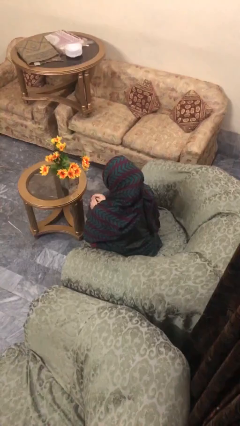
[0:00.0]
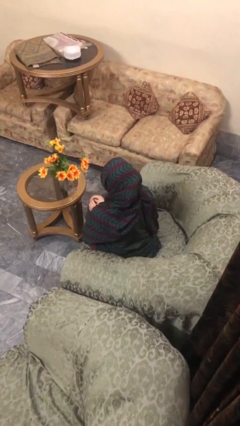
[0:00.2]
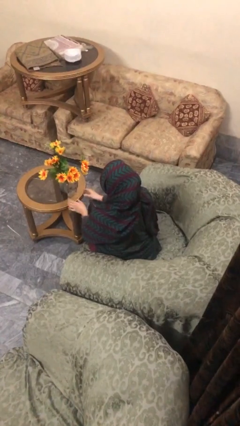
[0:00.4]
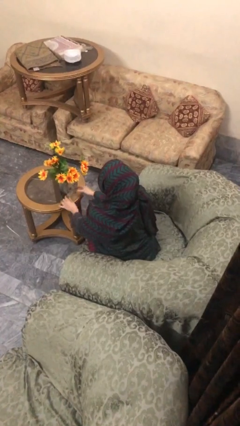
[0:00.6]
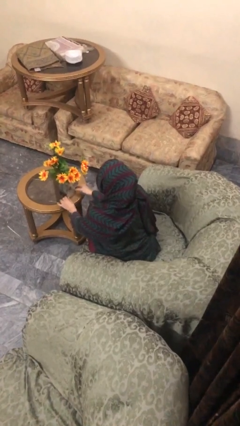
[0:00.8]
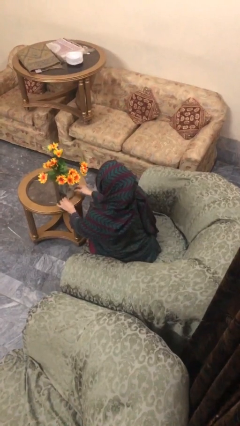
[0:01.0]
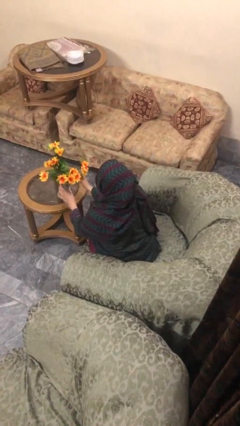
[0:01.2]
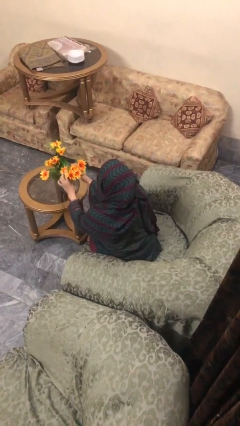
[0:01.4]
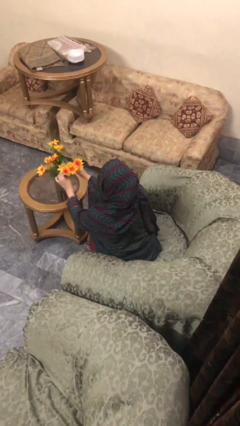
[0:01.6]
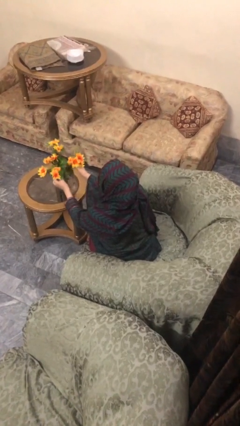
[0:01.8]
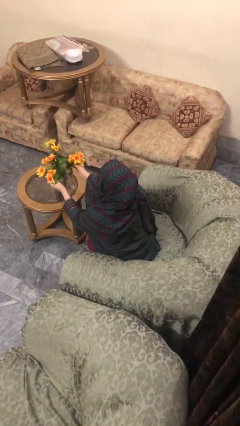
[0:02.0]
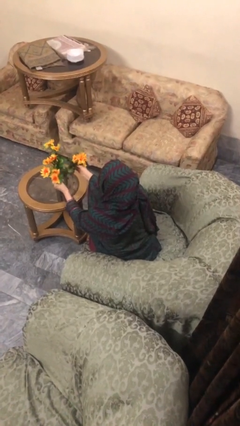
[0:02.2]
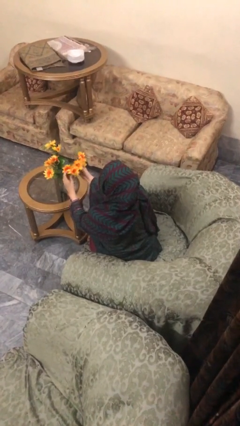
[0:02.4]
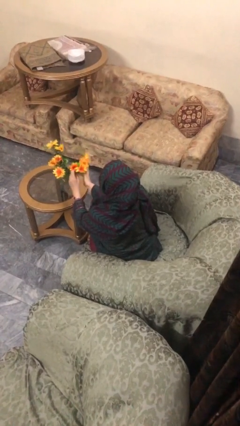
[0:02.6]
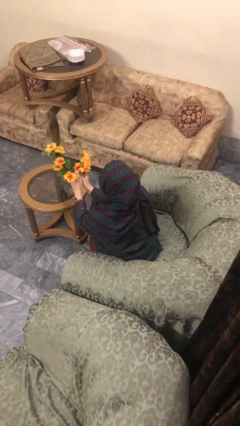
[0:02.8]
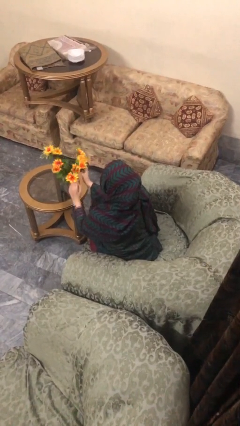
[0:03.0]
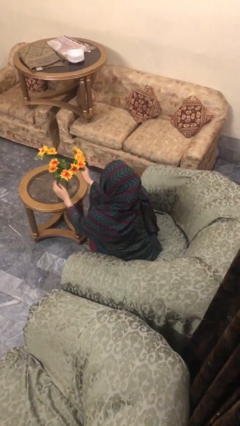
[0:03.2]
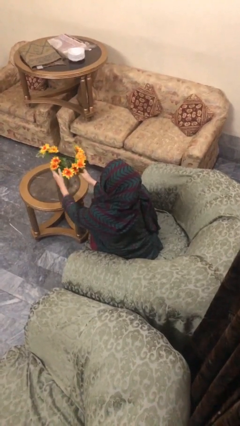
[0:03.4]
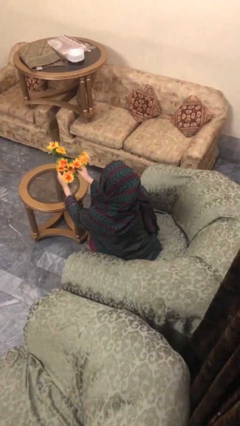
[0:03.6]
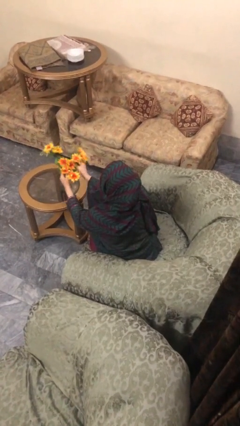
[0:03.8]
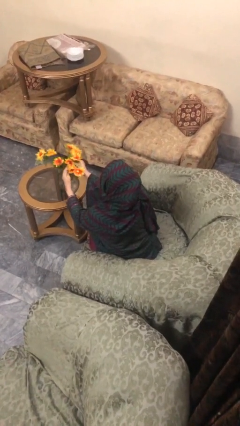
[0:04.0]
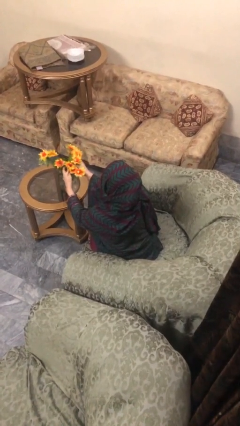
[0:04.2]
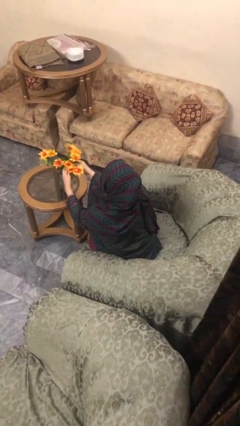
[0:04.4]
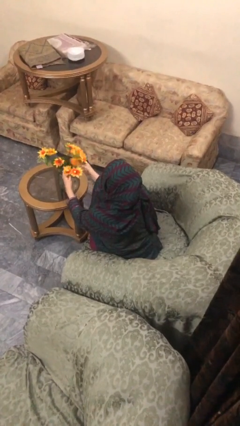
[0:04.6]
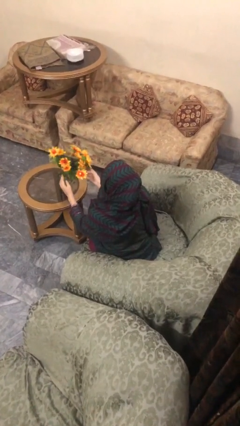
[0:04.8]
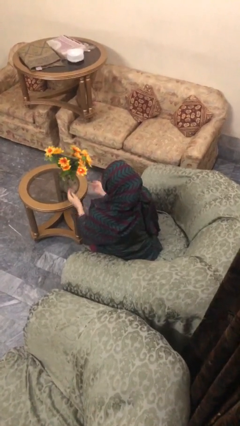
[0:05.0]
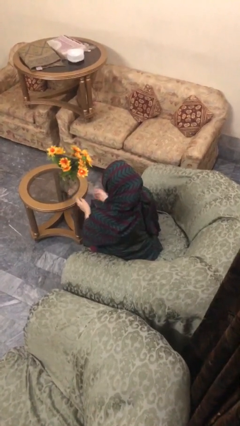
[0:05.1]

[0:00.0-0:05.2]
person arranges flowers in vase

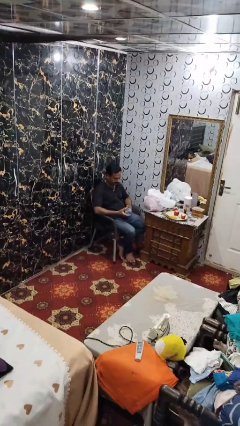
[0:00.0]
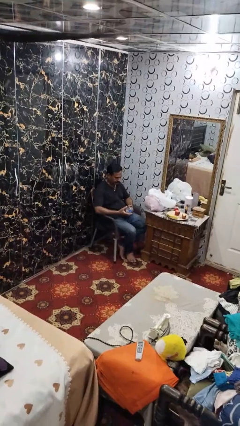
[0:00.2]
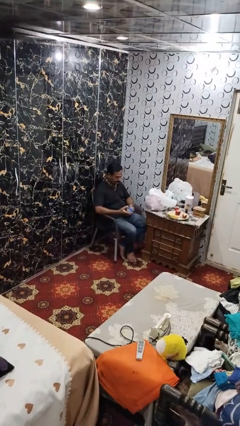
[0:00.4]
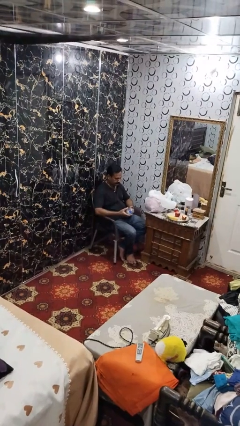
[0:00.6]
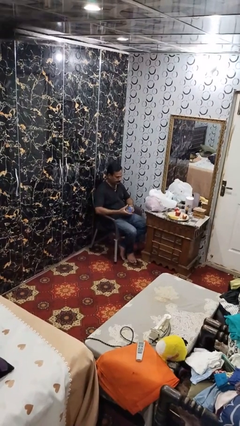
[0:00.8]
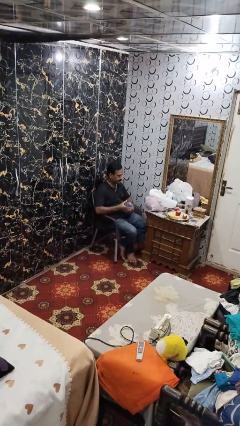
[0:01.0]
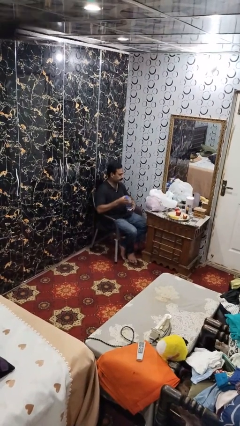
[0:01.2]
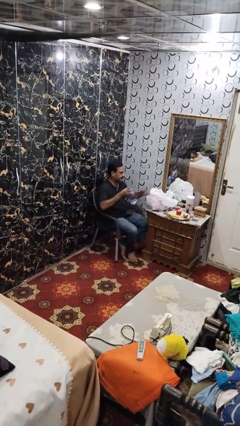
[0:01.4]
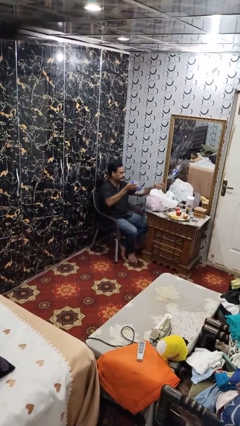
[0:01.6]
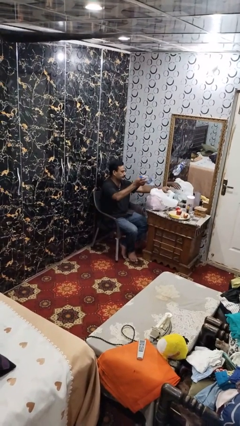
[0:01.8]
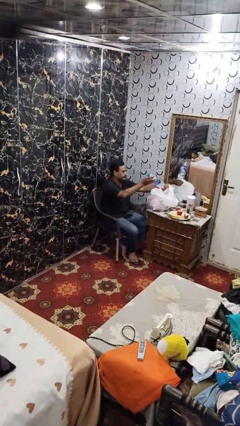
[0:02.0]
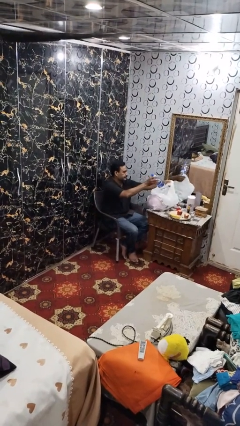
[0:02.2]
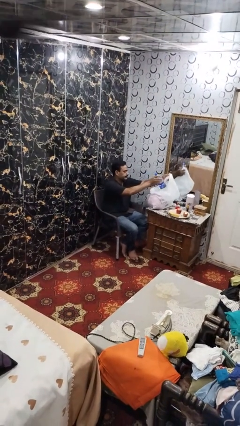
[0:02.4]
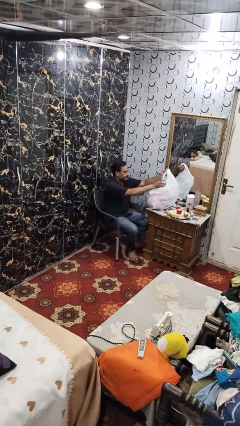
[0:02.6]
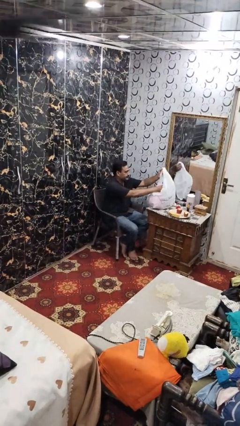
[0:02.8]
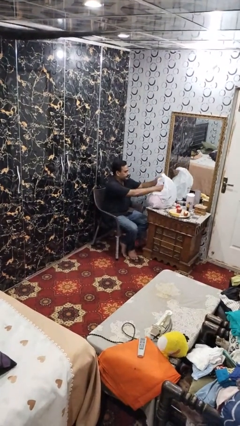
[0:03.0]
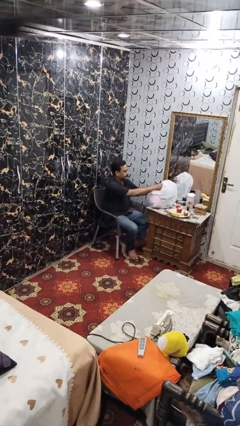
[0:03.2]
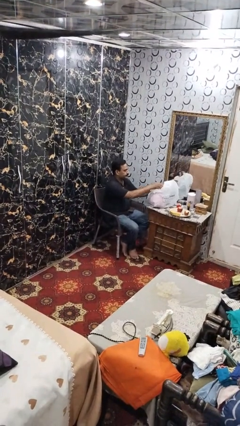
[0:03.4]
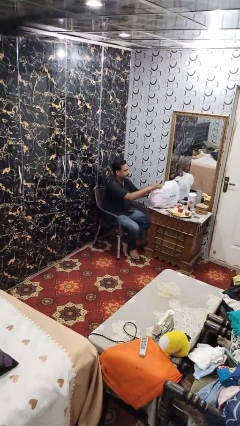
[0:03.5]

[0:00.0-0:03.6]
person puts object into bag

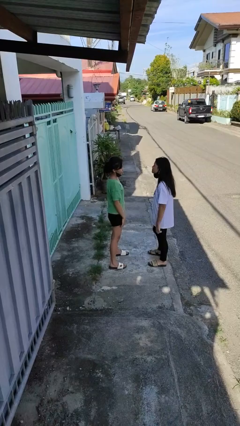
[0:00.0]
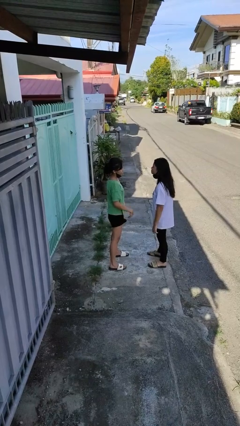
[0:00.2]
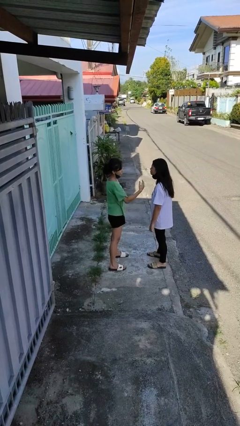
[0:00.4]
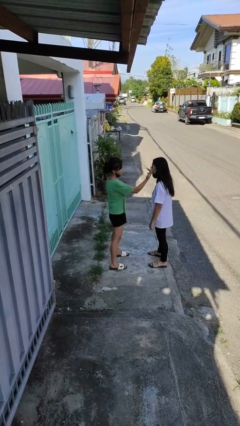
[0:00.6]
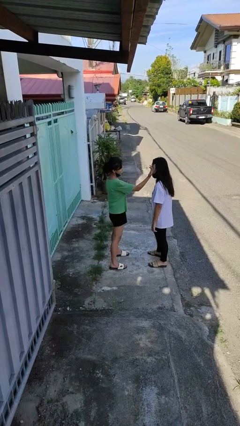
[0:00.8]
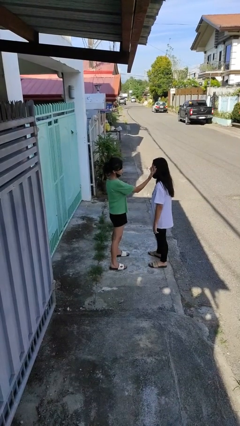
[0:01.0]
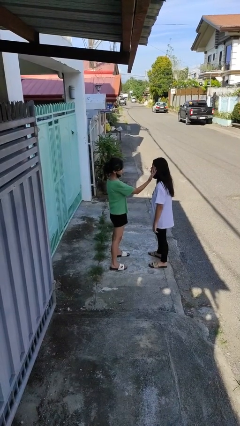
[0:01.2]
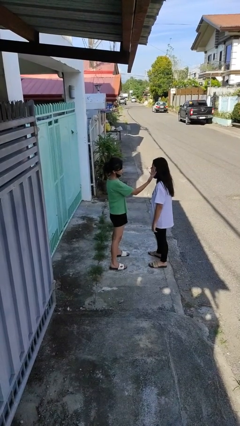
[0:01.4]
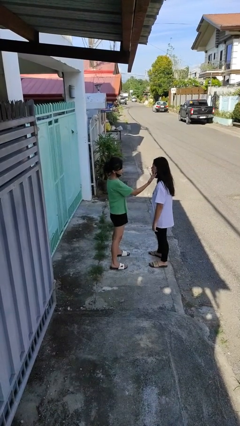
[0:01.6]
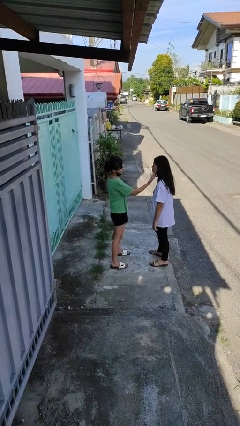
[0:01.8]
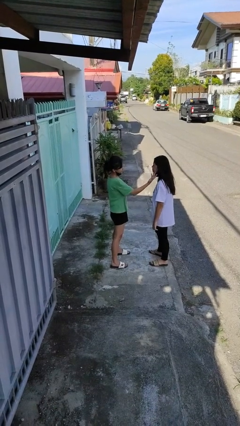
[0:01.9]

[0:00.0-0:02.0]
person touches face of person

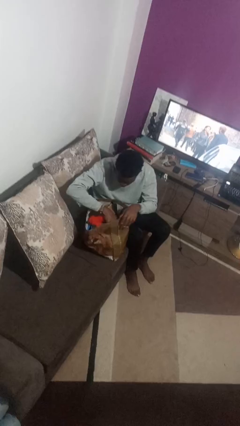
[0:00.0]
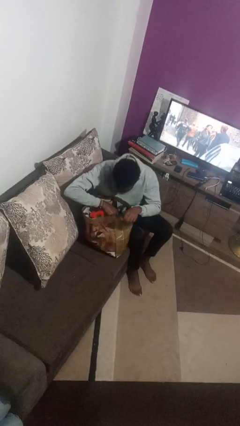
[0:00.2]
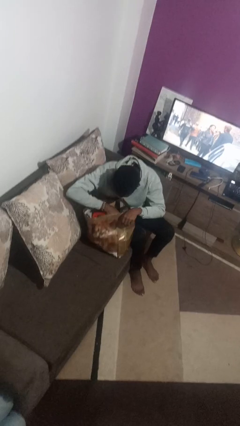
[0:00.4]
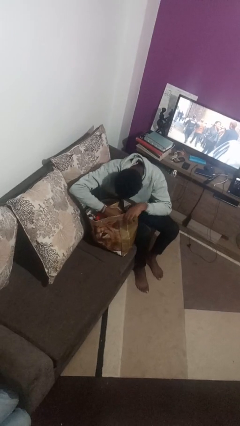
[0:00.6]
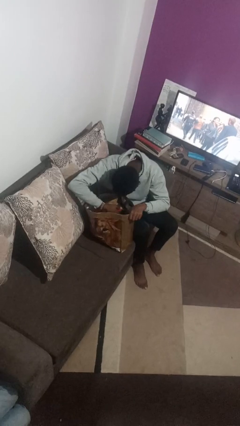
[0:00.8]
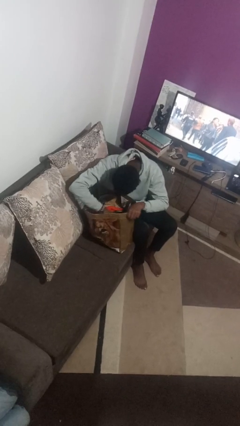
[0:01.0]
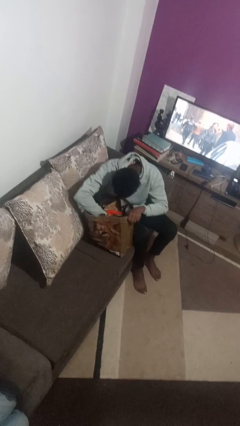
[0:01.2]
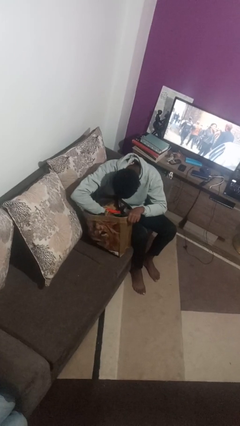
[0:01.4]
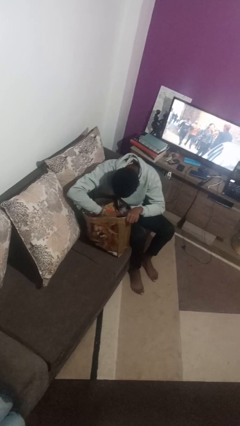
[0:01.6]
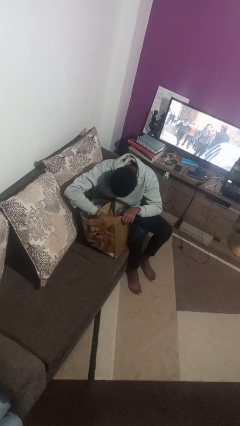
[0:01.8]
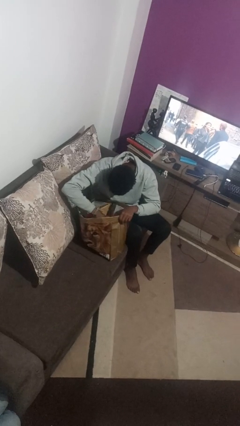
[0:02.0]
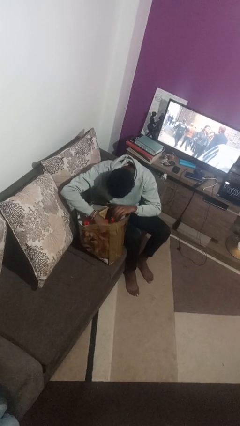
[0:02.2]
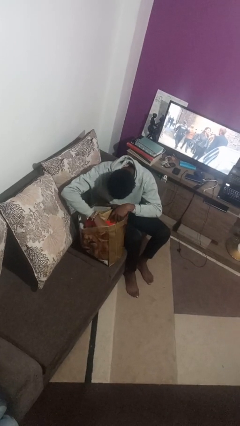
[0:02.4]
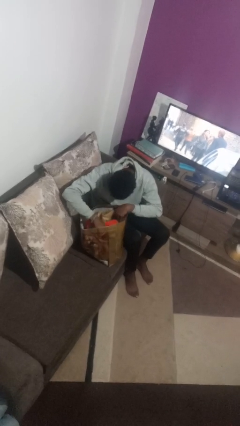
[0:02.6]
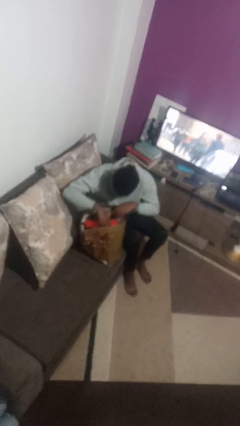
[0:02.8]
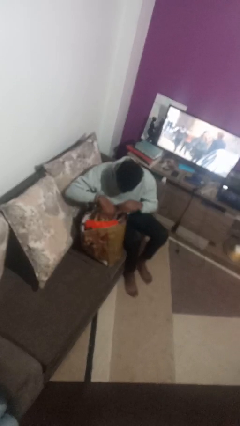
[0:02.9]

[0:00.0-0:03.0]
person searches in bag

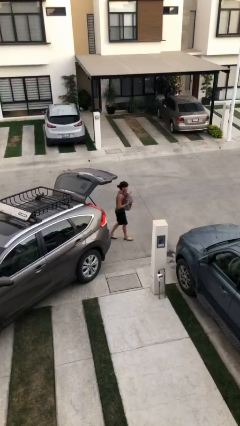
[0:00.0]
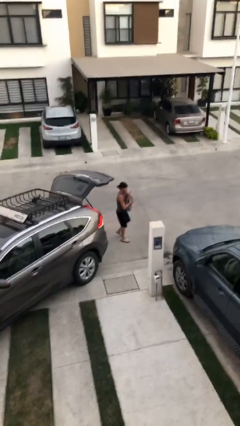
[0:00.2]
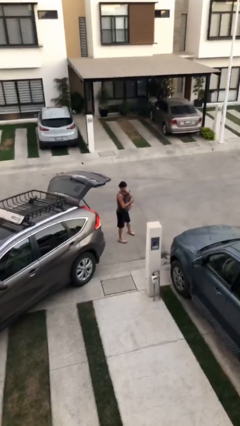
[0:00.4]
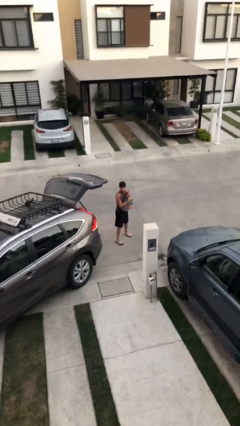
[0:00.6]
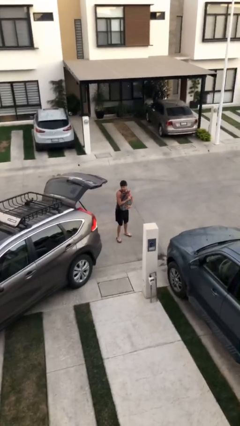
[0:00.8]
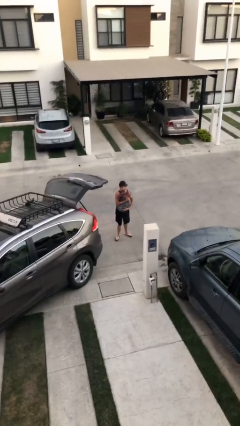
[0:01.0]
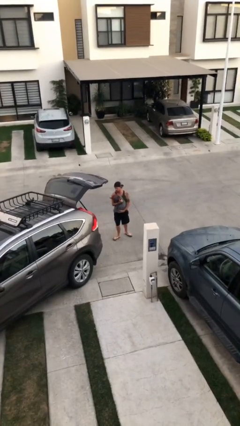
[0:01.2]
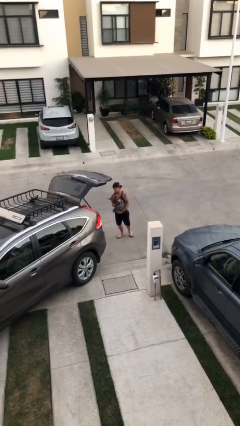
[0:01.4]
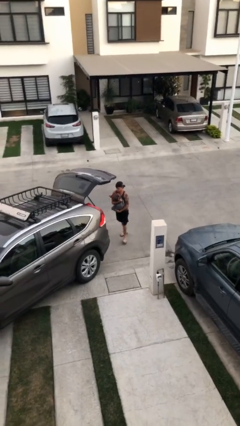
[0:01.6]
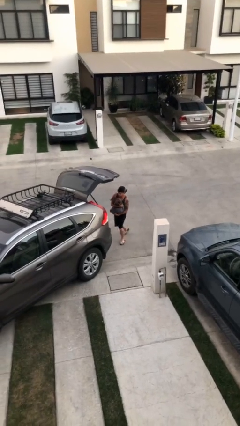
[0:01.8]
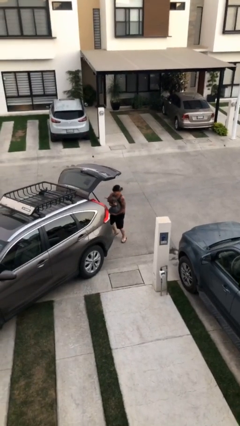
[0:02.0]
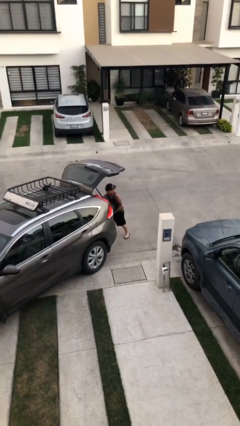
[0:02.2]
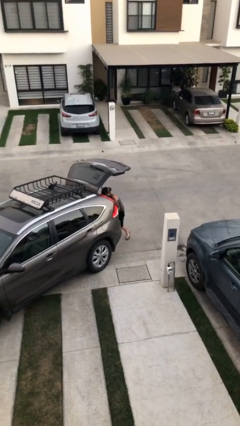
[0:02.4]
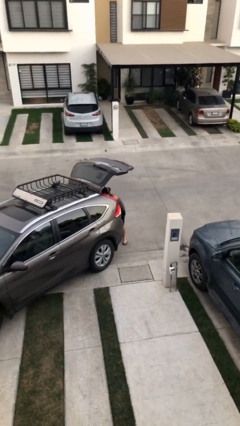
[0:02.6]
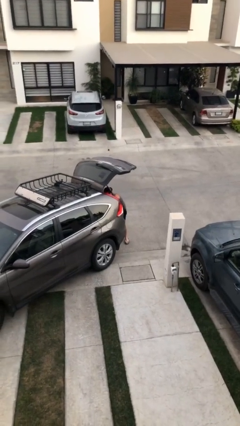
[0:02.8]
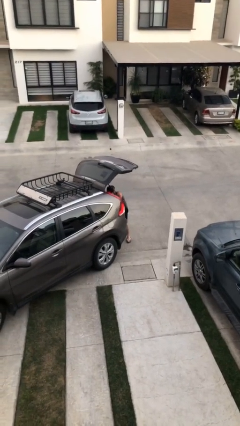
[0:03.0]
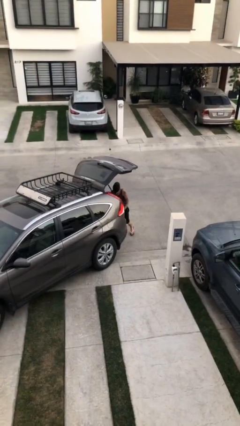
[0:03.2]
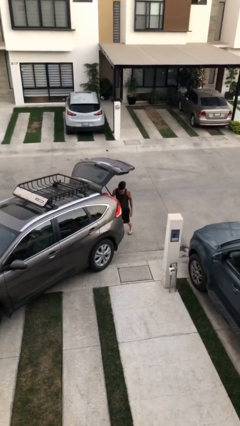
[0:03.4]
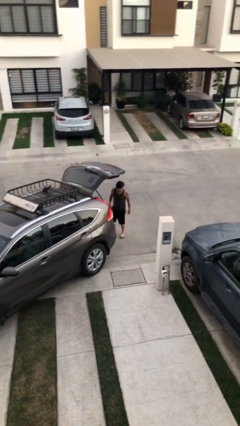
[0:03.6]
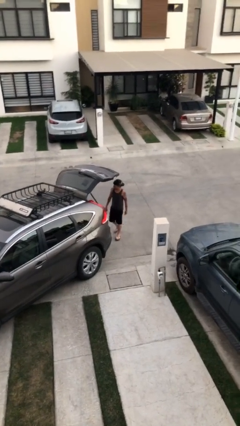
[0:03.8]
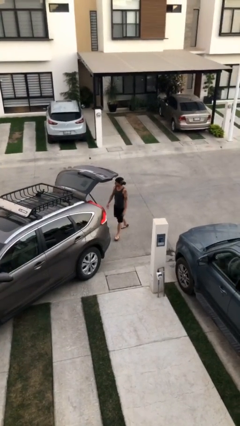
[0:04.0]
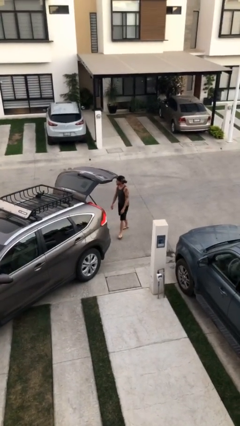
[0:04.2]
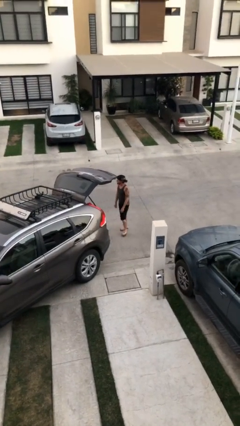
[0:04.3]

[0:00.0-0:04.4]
person loads car
